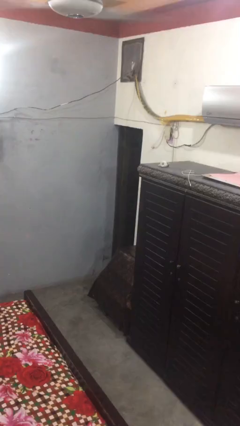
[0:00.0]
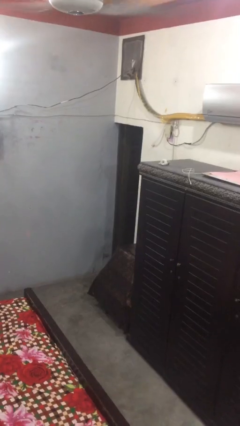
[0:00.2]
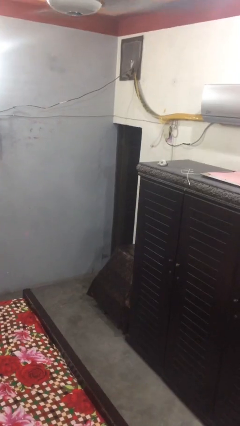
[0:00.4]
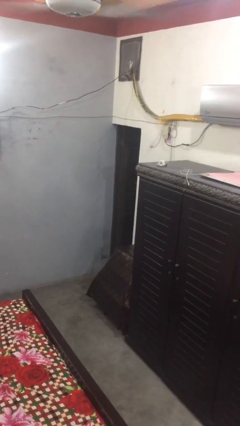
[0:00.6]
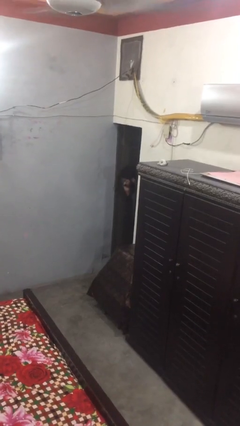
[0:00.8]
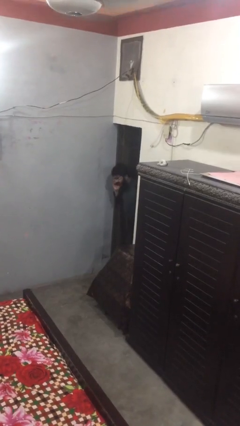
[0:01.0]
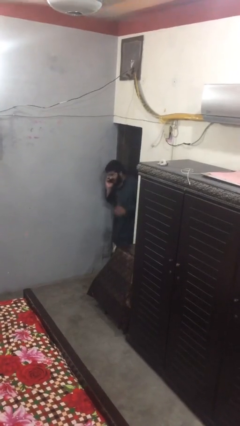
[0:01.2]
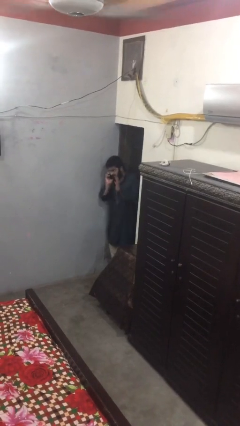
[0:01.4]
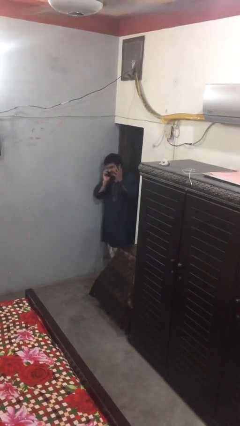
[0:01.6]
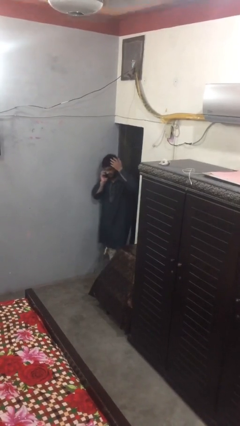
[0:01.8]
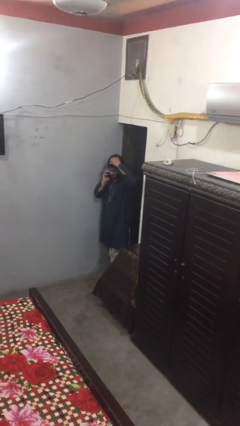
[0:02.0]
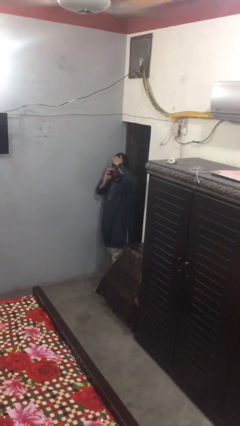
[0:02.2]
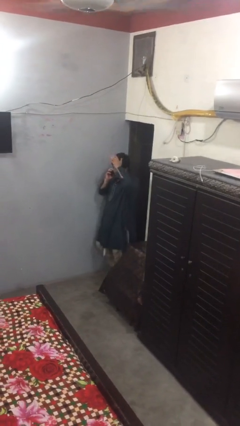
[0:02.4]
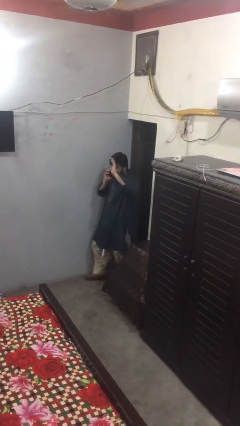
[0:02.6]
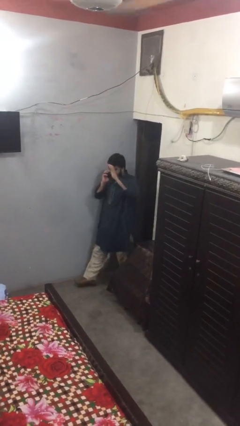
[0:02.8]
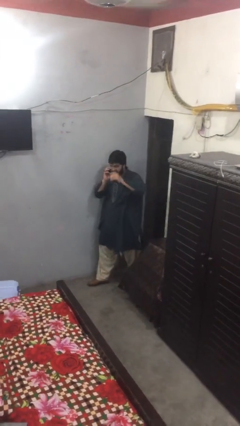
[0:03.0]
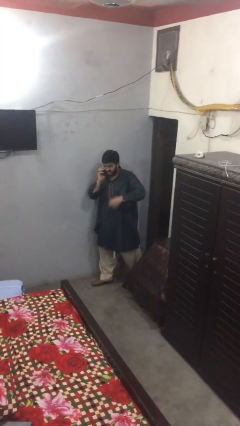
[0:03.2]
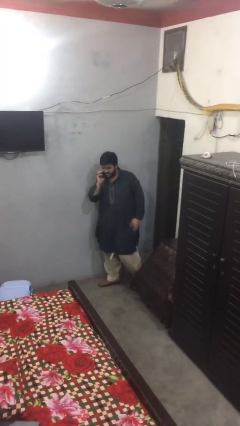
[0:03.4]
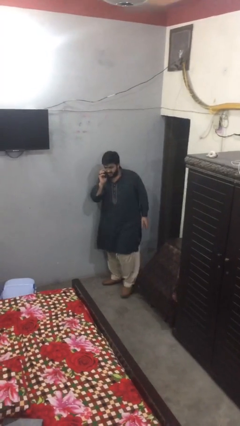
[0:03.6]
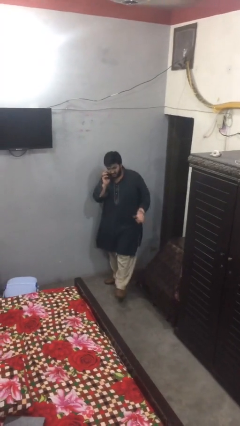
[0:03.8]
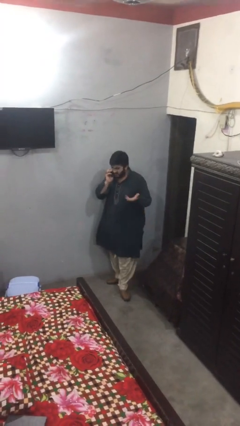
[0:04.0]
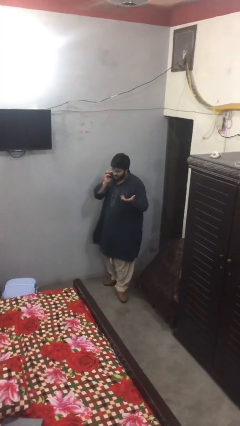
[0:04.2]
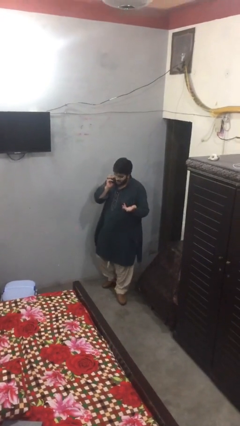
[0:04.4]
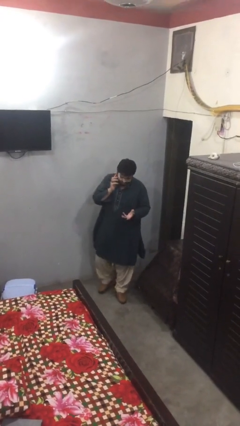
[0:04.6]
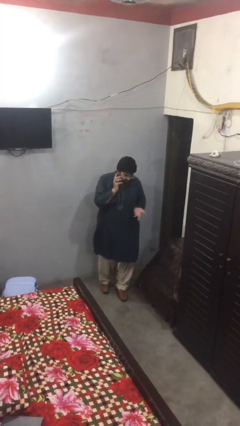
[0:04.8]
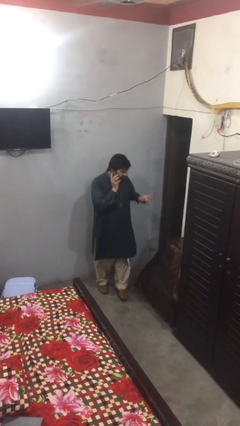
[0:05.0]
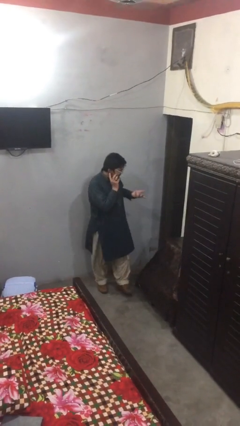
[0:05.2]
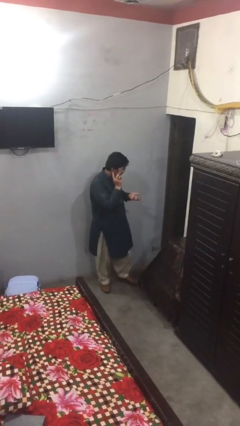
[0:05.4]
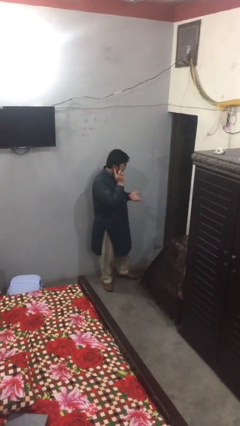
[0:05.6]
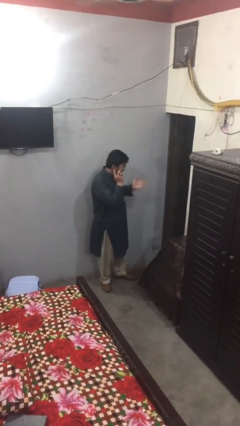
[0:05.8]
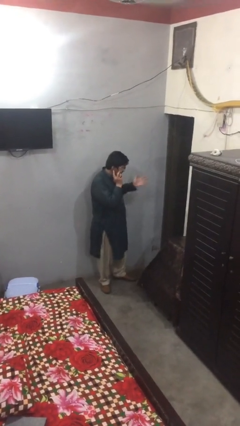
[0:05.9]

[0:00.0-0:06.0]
person enters scene through structure

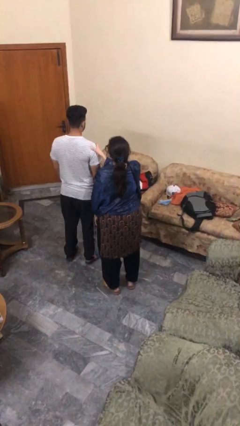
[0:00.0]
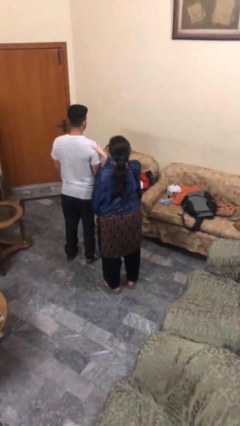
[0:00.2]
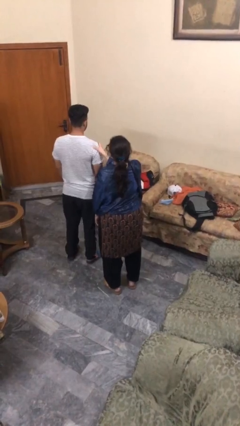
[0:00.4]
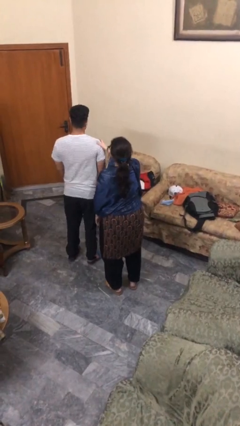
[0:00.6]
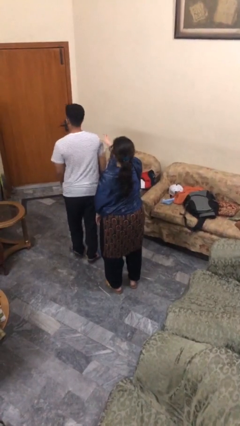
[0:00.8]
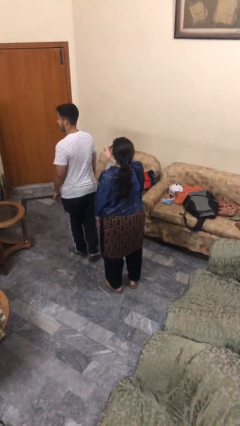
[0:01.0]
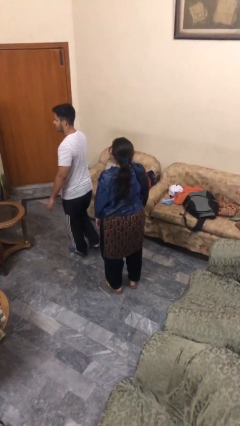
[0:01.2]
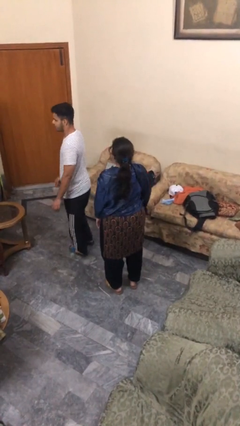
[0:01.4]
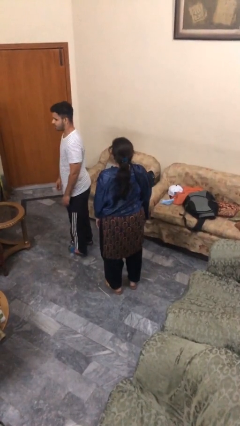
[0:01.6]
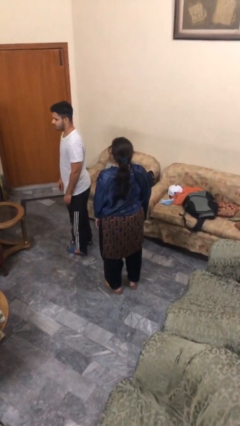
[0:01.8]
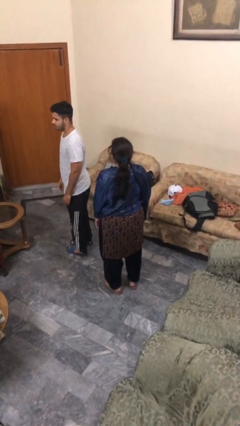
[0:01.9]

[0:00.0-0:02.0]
person spins person around

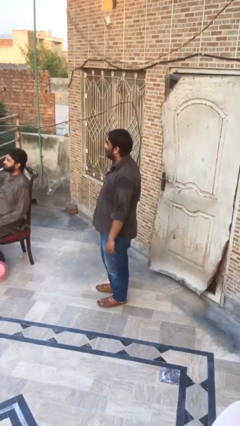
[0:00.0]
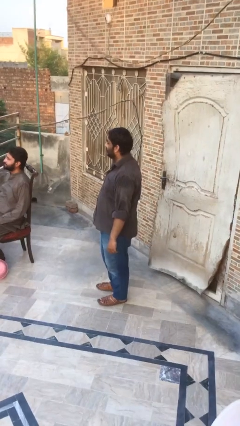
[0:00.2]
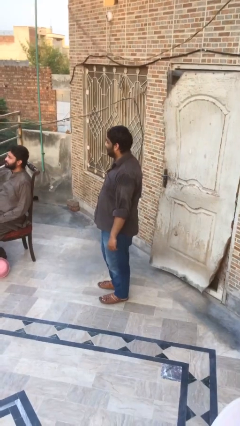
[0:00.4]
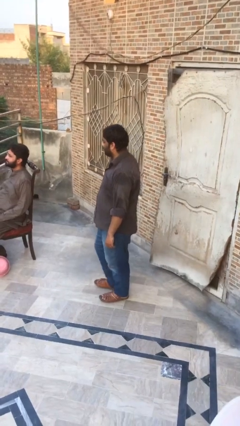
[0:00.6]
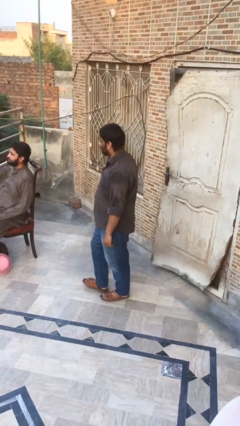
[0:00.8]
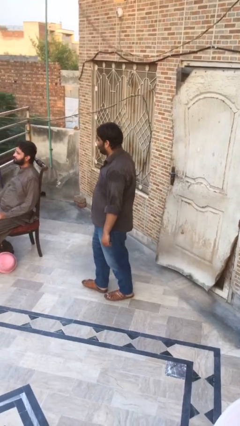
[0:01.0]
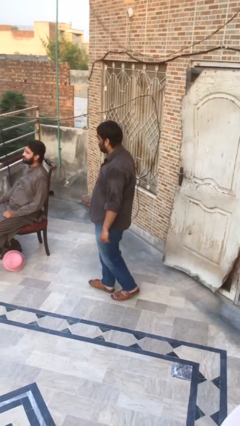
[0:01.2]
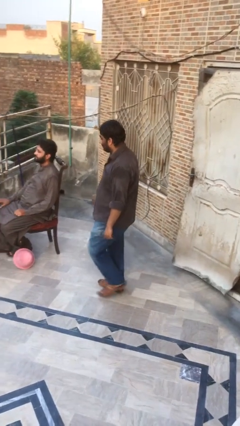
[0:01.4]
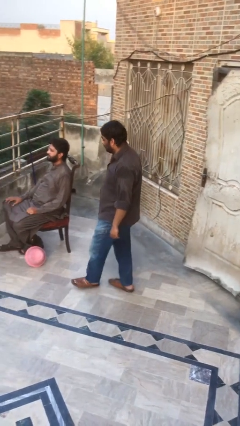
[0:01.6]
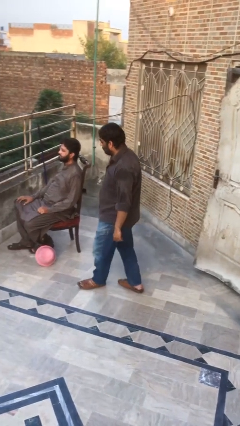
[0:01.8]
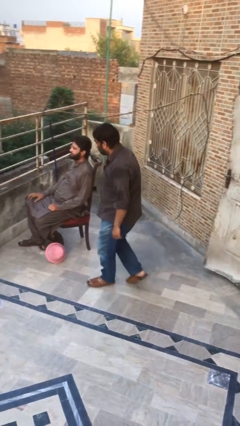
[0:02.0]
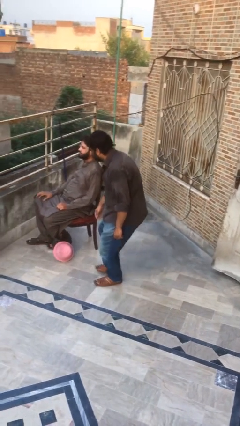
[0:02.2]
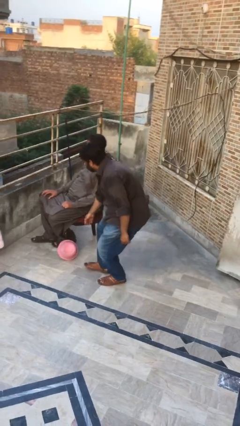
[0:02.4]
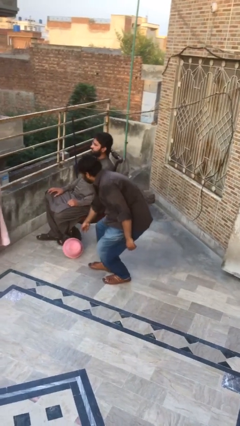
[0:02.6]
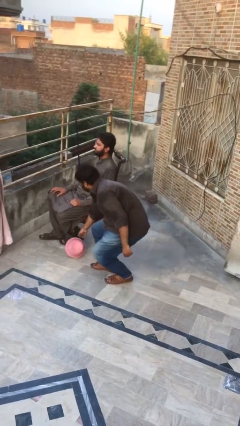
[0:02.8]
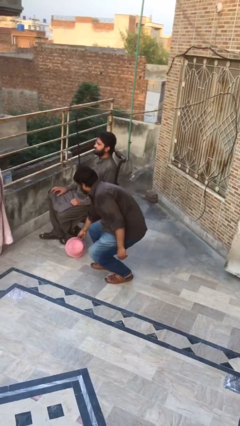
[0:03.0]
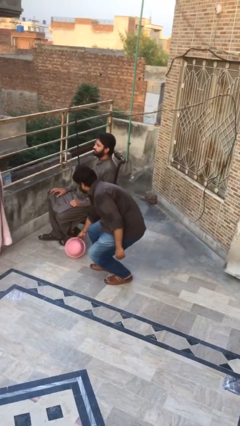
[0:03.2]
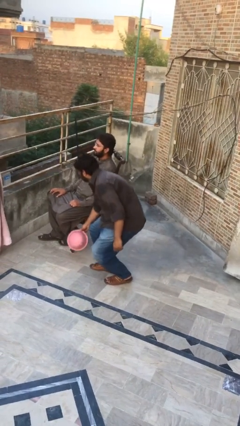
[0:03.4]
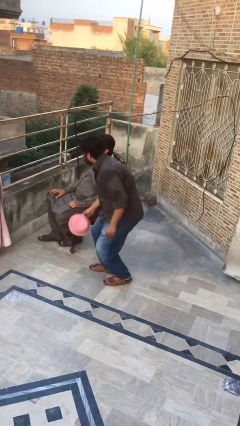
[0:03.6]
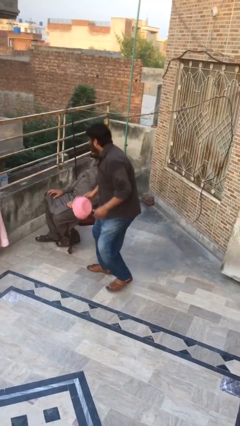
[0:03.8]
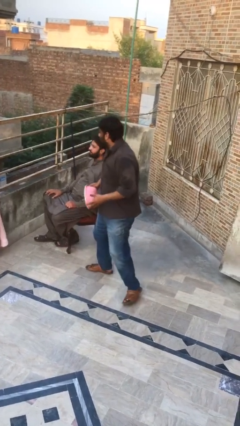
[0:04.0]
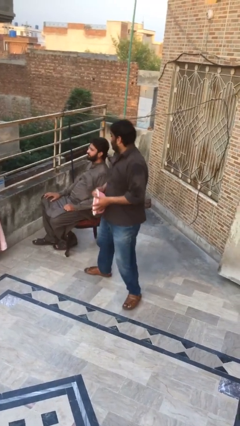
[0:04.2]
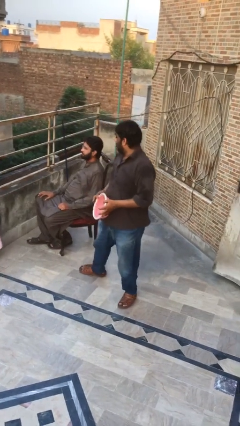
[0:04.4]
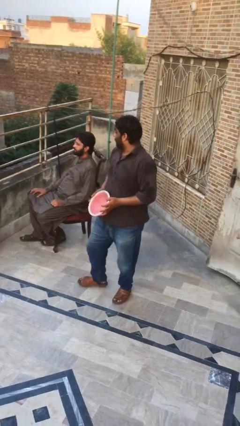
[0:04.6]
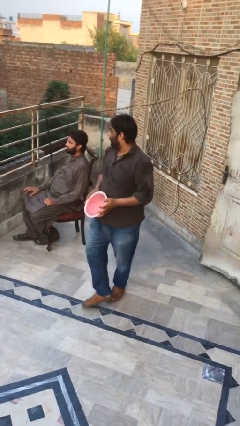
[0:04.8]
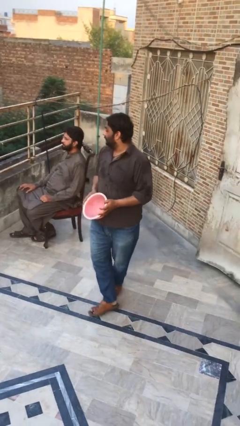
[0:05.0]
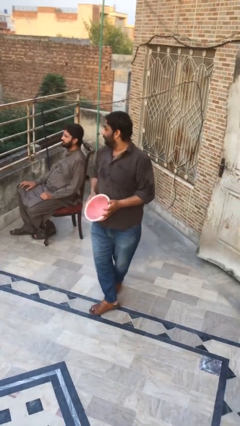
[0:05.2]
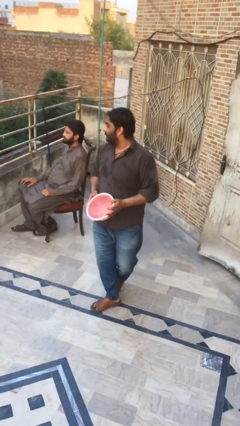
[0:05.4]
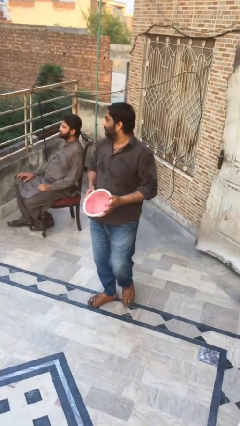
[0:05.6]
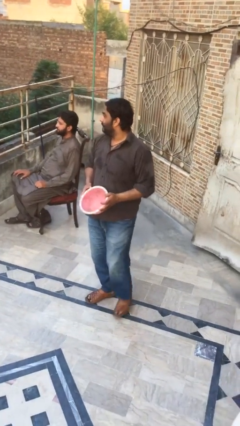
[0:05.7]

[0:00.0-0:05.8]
person steals object from person

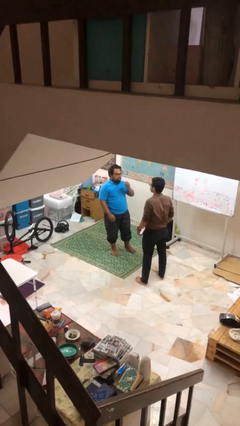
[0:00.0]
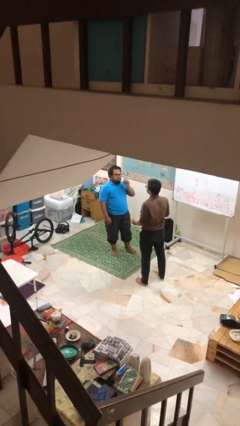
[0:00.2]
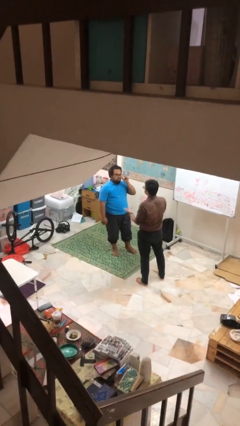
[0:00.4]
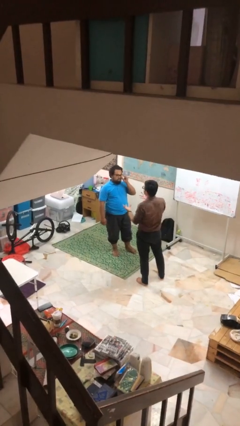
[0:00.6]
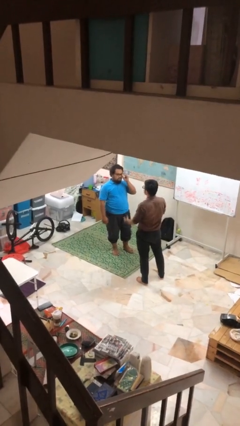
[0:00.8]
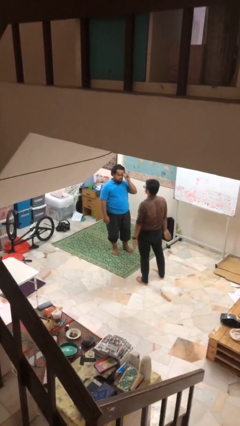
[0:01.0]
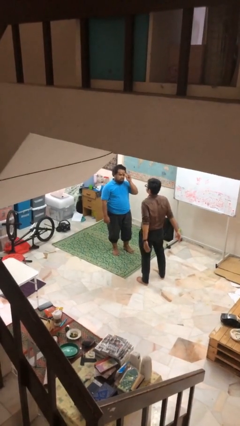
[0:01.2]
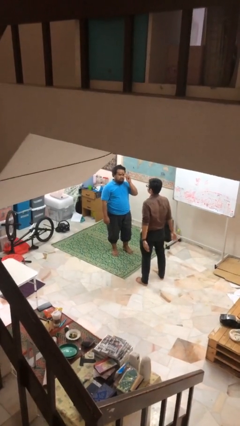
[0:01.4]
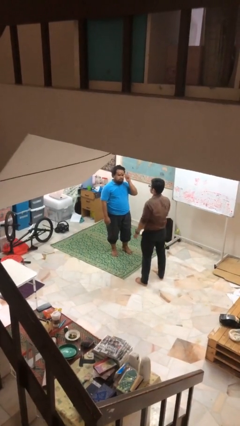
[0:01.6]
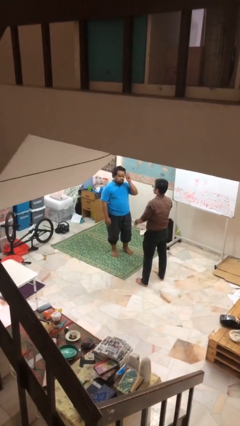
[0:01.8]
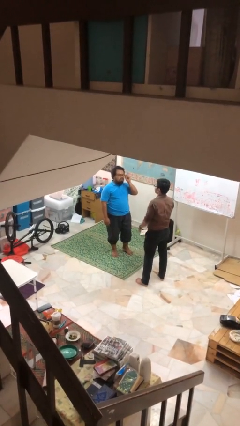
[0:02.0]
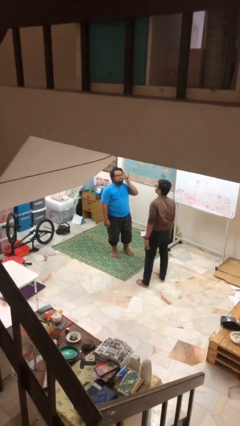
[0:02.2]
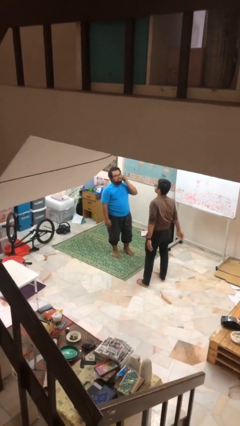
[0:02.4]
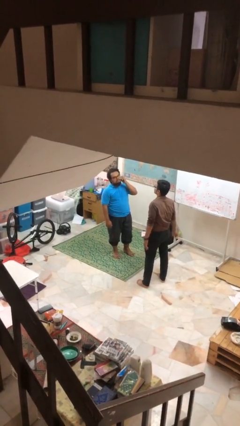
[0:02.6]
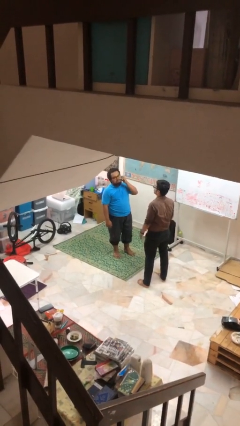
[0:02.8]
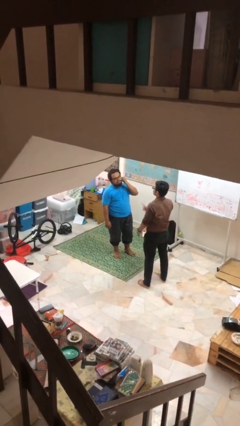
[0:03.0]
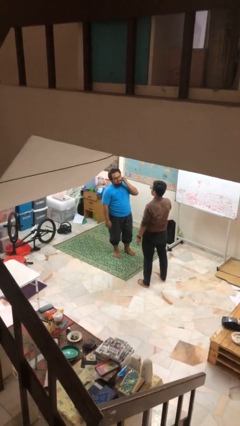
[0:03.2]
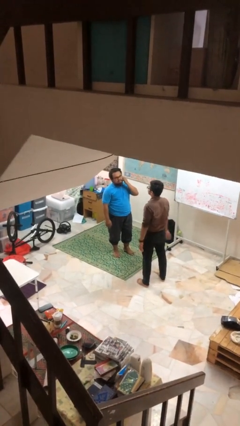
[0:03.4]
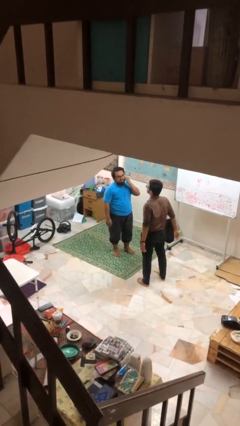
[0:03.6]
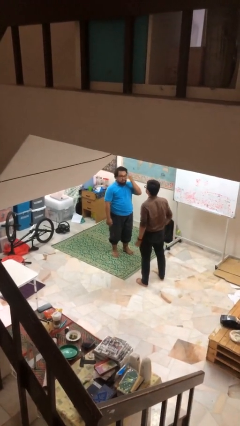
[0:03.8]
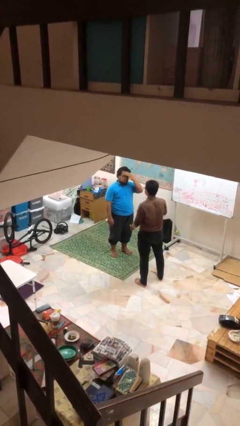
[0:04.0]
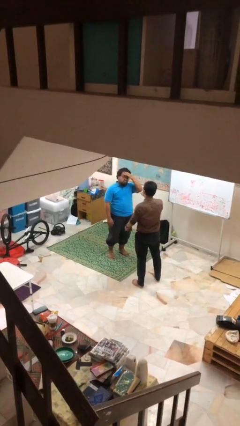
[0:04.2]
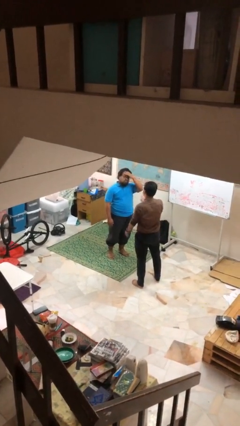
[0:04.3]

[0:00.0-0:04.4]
person talks to person
